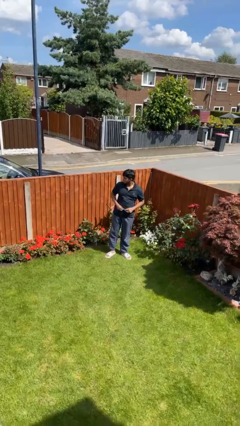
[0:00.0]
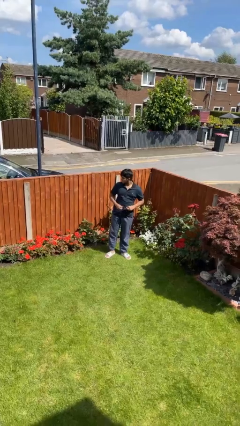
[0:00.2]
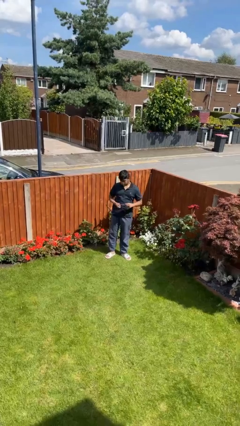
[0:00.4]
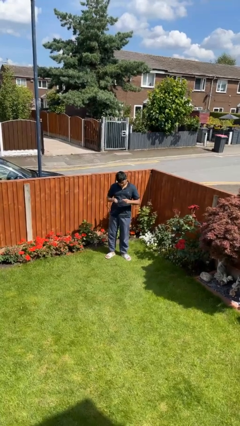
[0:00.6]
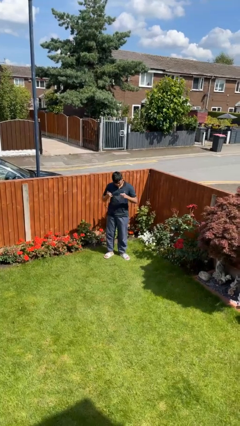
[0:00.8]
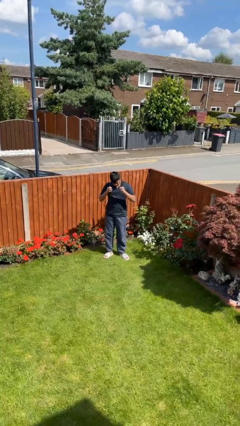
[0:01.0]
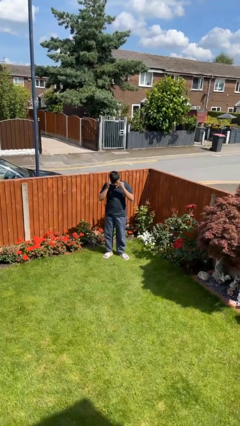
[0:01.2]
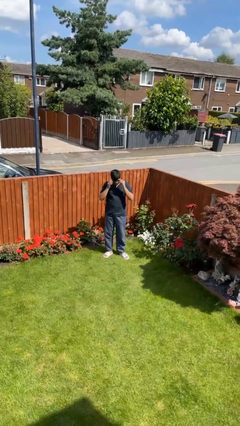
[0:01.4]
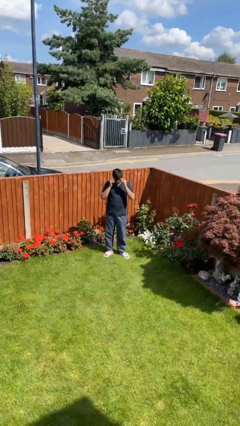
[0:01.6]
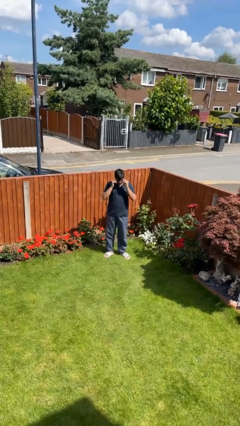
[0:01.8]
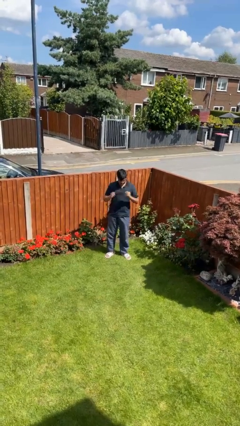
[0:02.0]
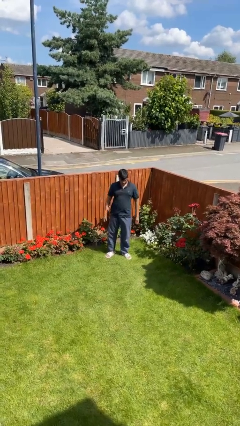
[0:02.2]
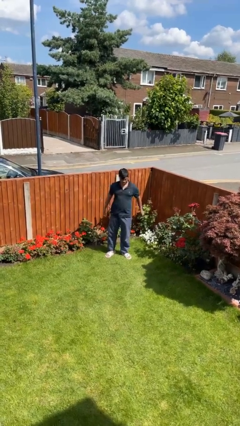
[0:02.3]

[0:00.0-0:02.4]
person puts on glasses

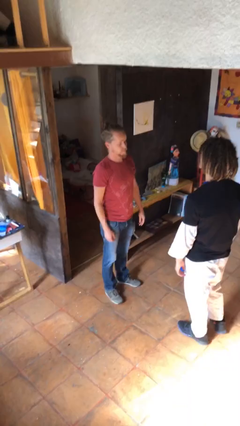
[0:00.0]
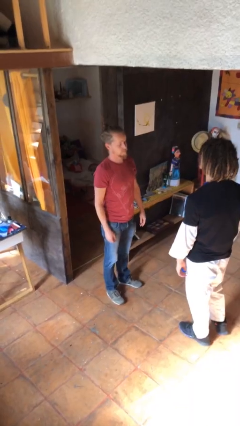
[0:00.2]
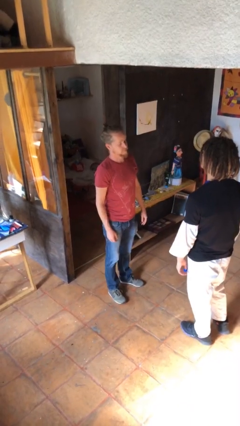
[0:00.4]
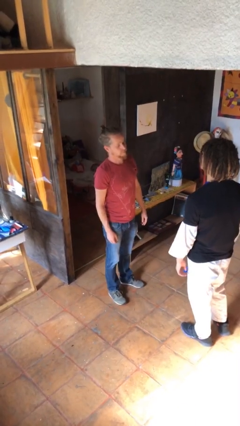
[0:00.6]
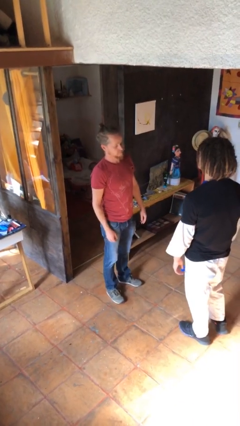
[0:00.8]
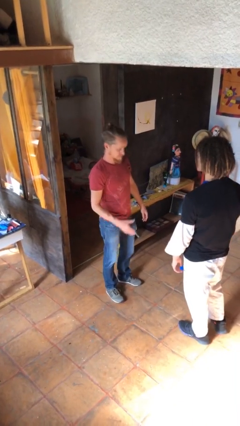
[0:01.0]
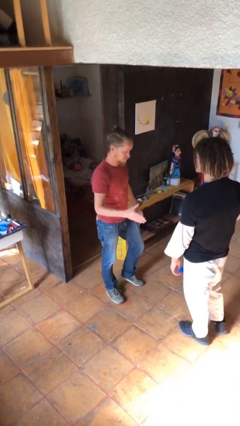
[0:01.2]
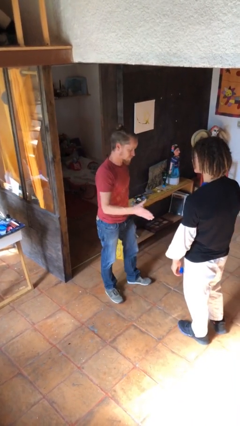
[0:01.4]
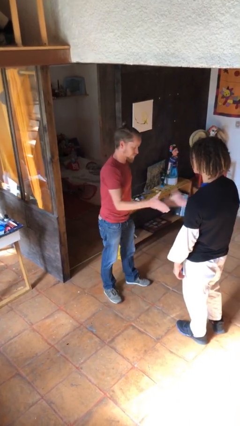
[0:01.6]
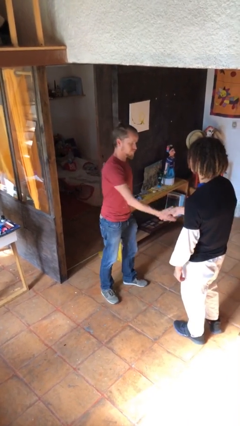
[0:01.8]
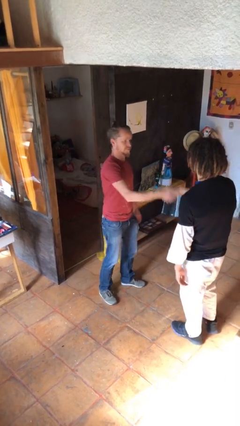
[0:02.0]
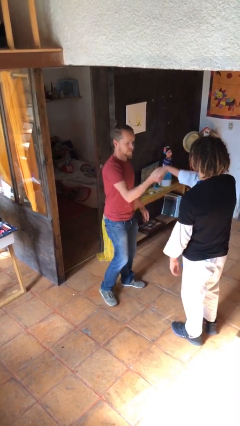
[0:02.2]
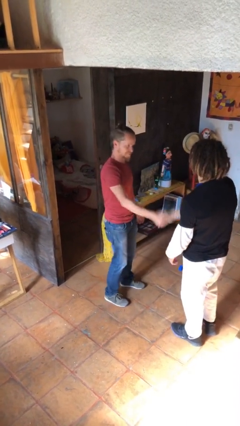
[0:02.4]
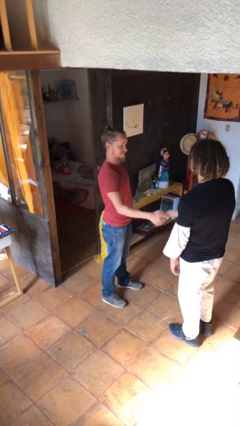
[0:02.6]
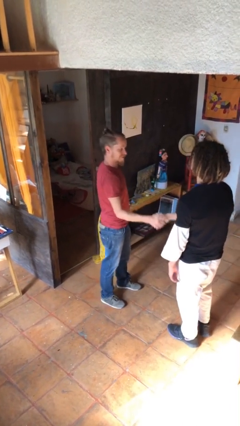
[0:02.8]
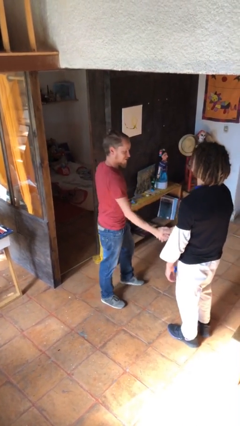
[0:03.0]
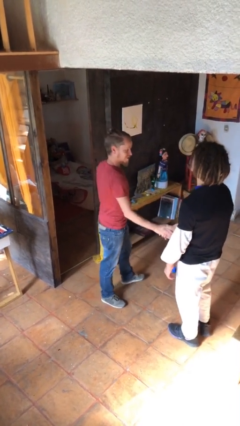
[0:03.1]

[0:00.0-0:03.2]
person shakes hand

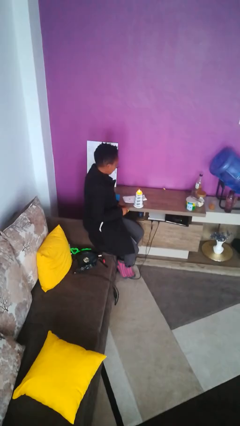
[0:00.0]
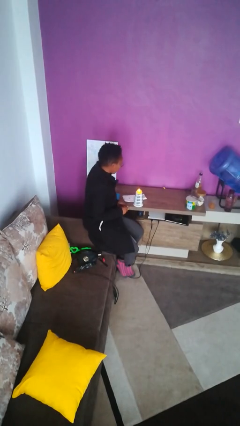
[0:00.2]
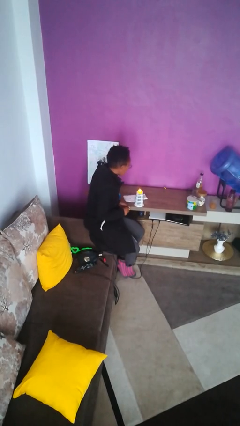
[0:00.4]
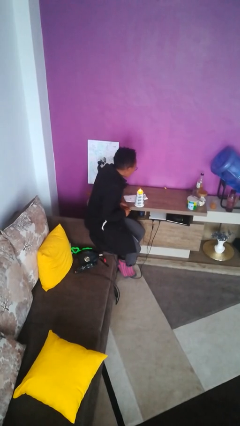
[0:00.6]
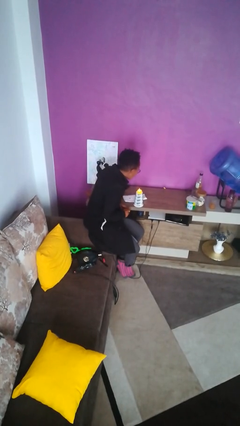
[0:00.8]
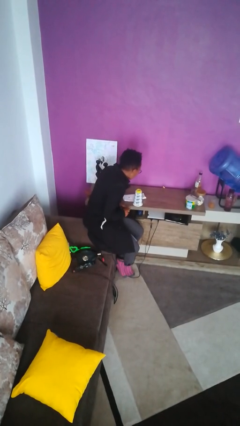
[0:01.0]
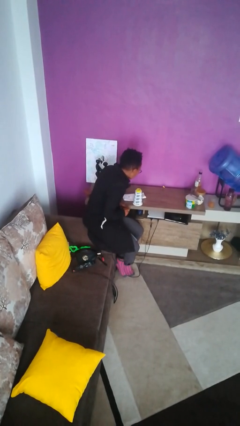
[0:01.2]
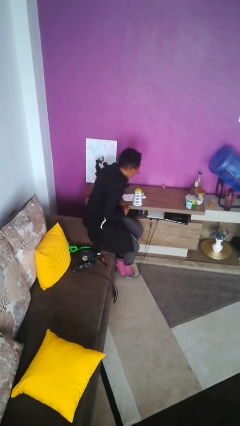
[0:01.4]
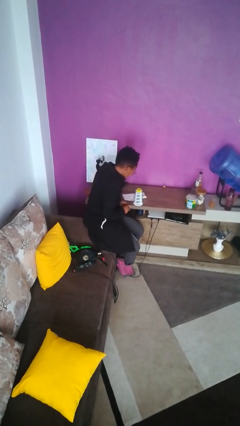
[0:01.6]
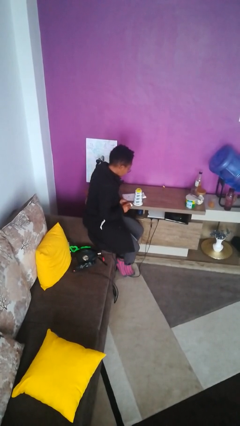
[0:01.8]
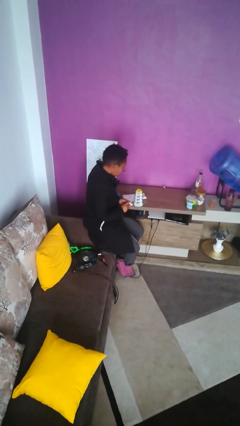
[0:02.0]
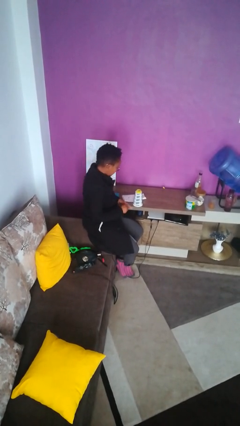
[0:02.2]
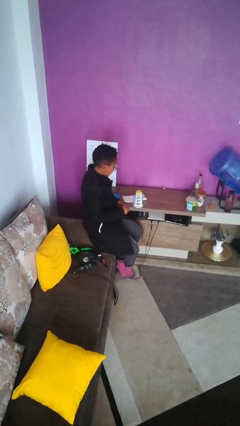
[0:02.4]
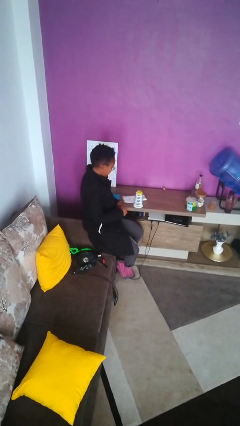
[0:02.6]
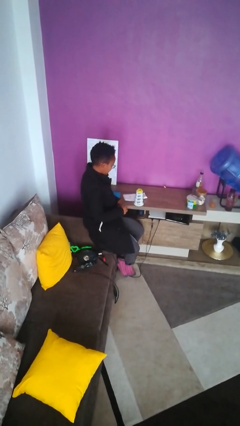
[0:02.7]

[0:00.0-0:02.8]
person extinguishes candle

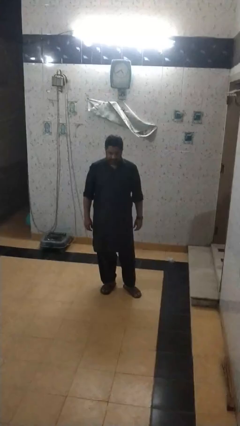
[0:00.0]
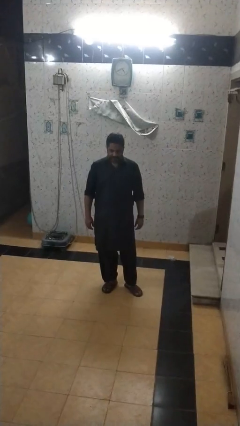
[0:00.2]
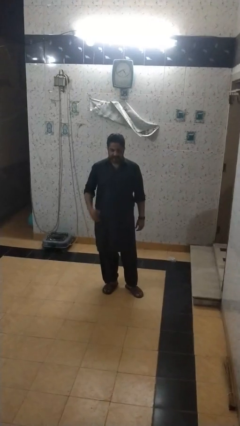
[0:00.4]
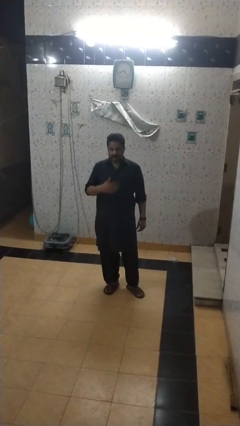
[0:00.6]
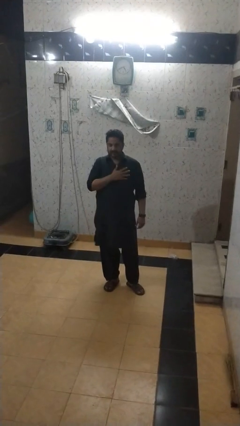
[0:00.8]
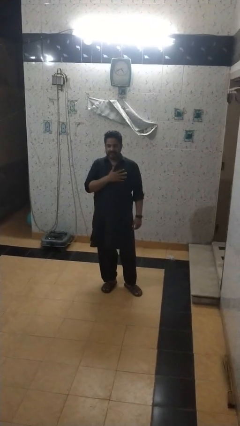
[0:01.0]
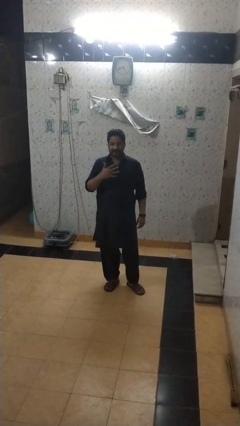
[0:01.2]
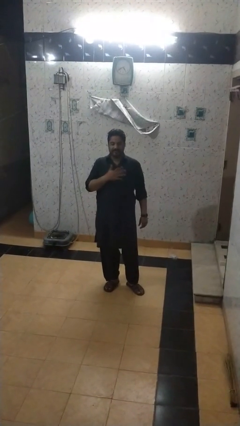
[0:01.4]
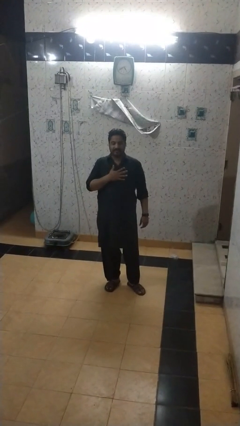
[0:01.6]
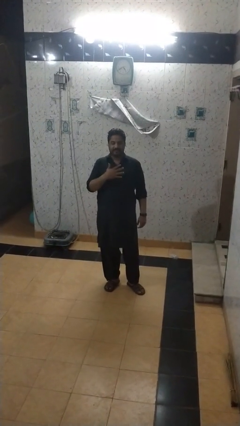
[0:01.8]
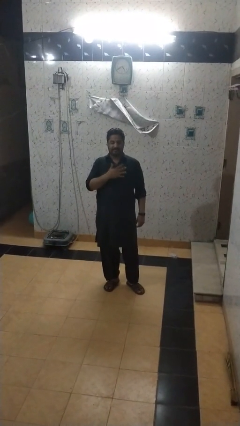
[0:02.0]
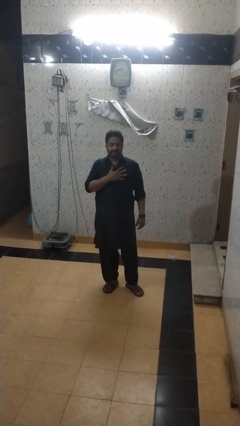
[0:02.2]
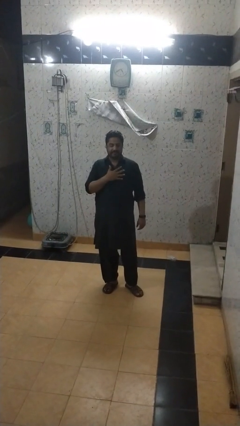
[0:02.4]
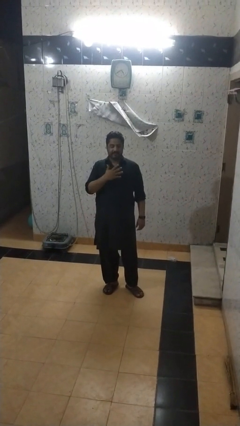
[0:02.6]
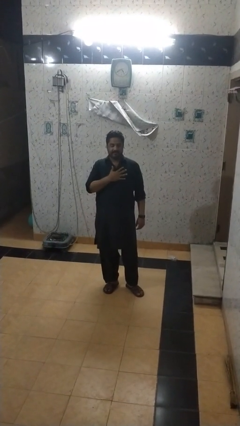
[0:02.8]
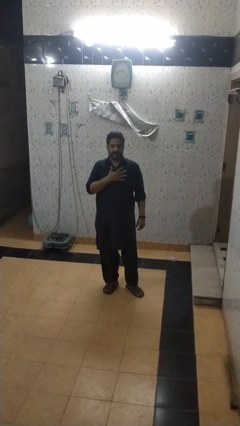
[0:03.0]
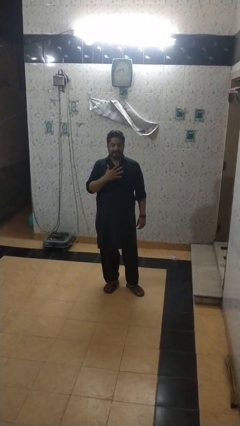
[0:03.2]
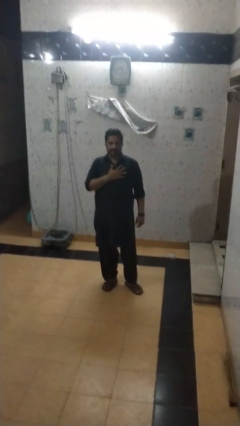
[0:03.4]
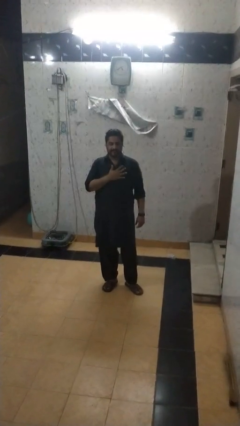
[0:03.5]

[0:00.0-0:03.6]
person drums on chest

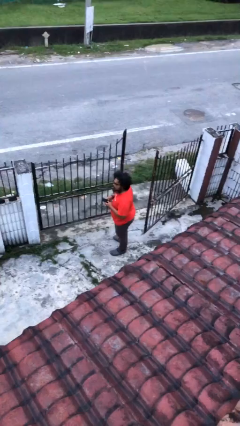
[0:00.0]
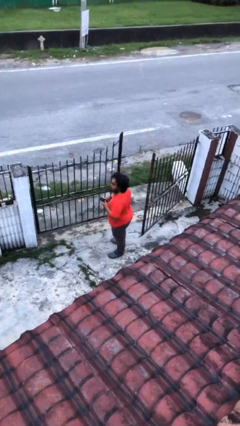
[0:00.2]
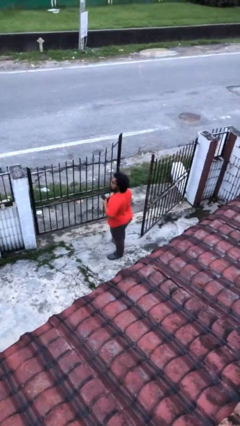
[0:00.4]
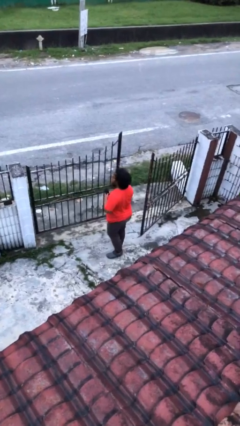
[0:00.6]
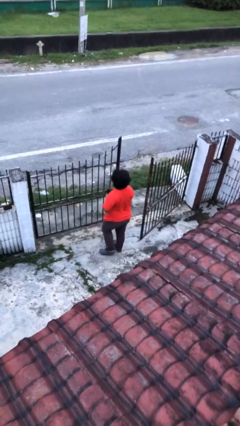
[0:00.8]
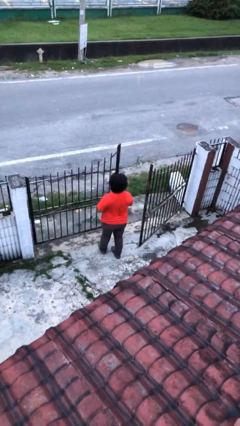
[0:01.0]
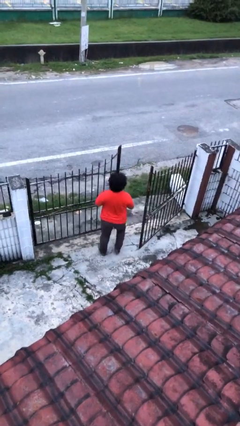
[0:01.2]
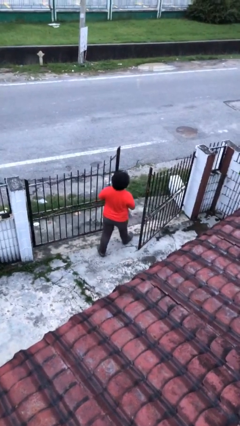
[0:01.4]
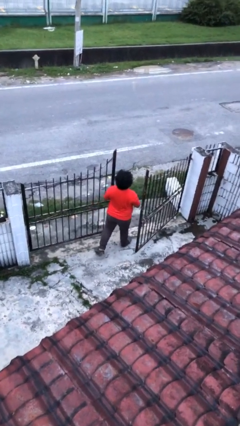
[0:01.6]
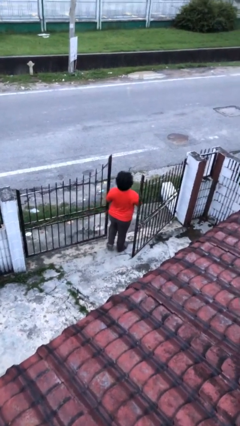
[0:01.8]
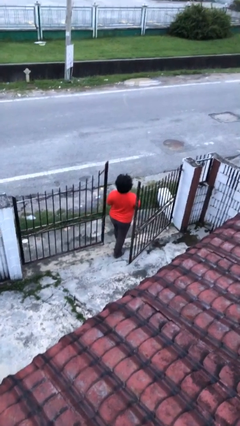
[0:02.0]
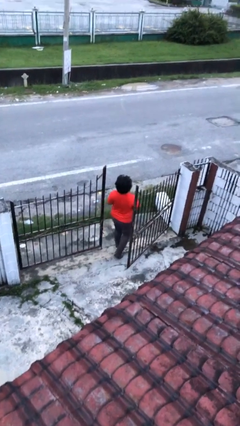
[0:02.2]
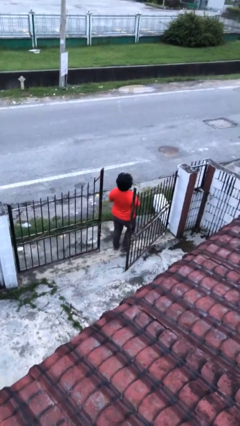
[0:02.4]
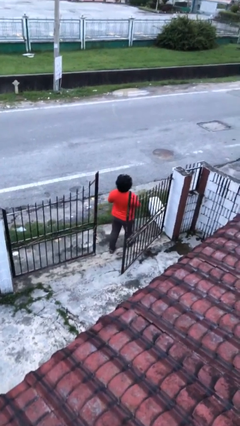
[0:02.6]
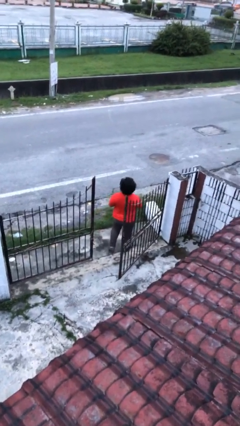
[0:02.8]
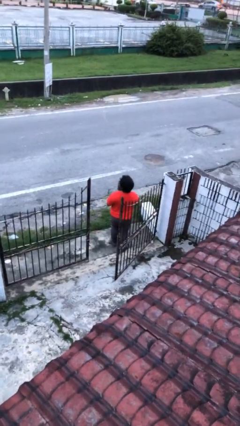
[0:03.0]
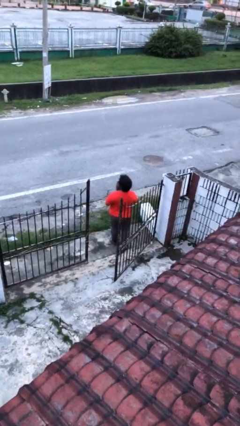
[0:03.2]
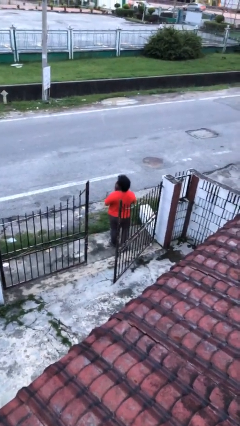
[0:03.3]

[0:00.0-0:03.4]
person exits scene through structure

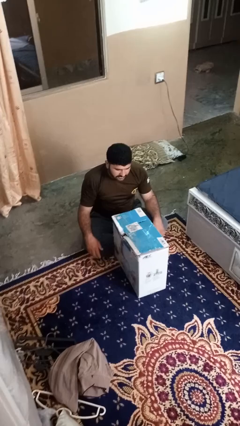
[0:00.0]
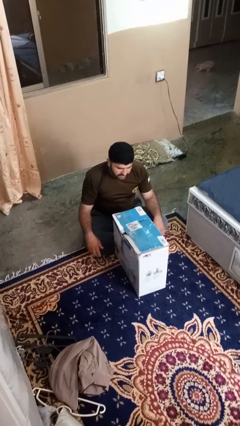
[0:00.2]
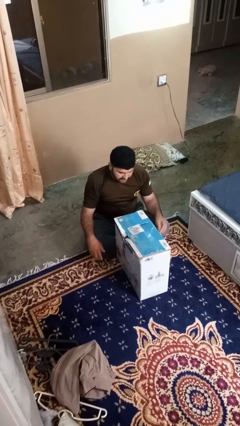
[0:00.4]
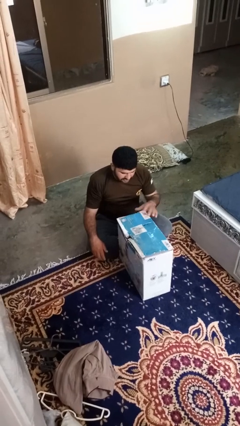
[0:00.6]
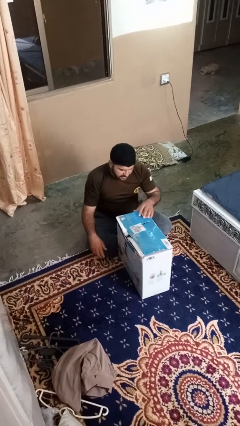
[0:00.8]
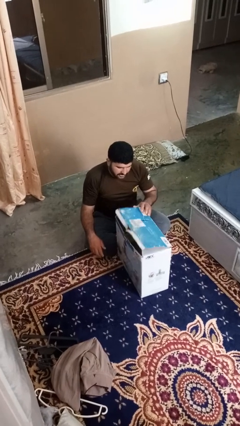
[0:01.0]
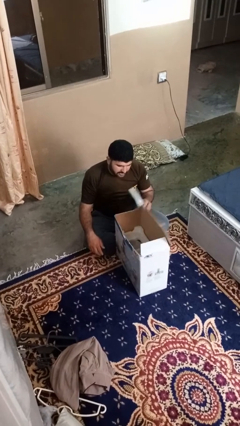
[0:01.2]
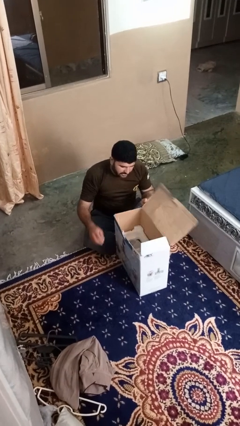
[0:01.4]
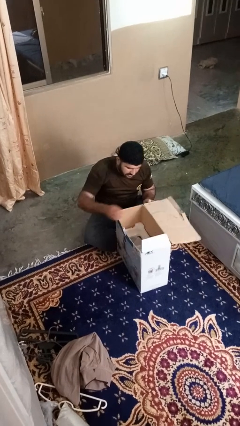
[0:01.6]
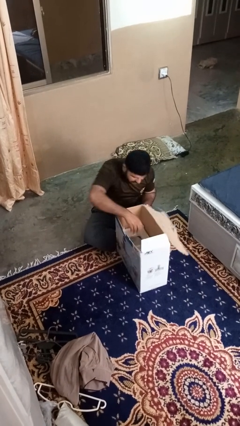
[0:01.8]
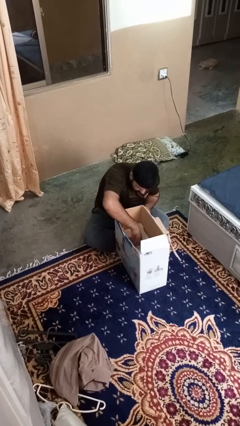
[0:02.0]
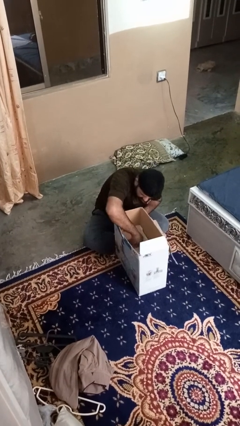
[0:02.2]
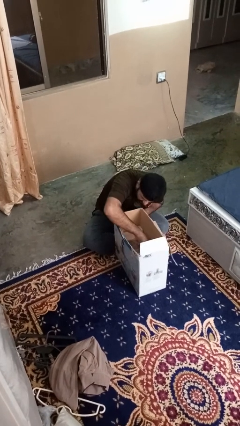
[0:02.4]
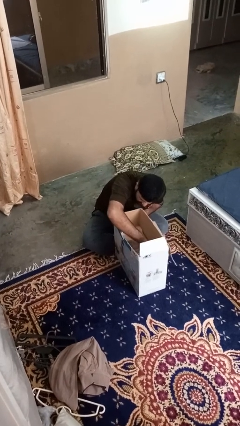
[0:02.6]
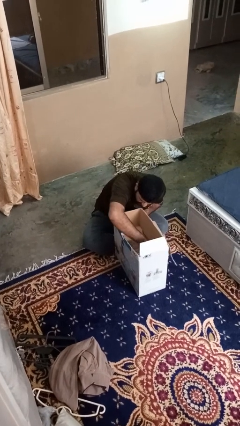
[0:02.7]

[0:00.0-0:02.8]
person searches in box
